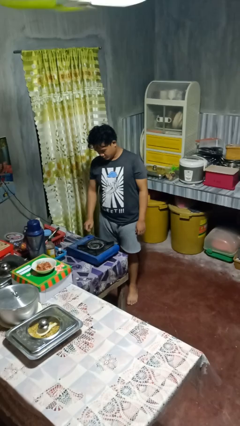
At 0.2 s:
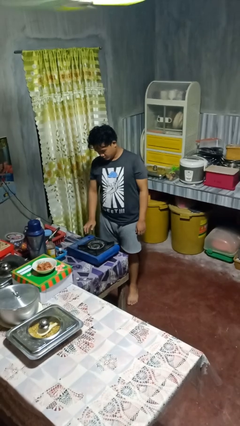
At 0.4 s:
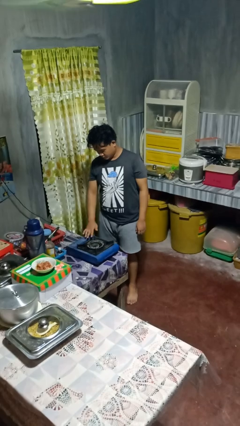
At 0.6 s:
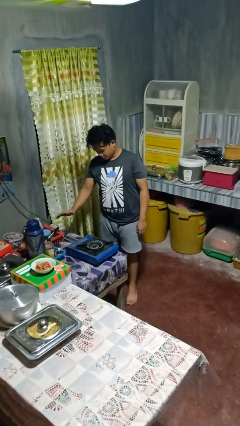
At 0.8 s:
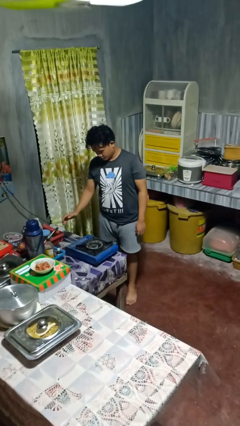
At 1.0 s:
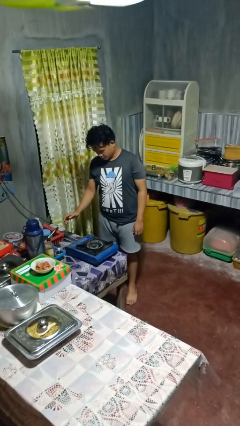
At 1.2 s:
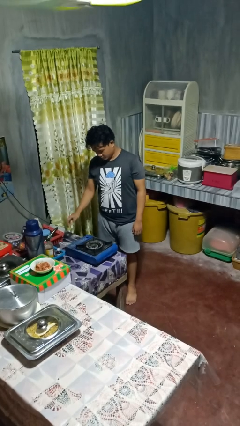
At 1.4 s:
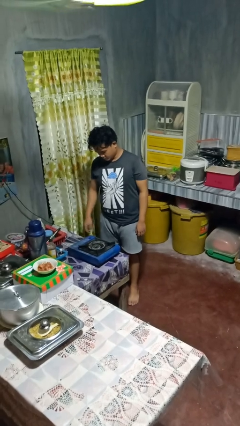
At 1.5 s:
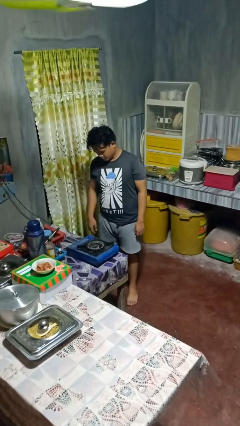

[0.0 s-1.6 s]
person burns hand

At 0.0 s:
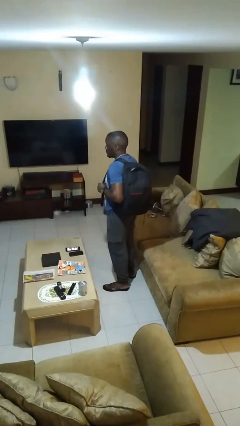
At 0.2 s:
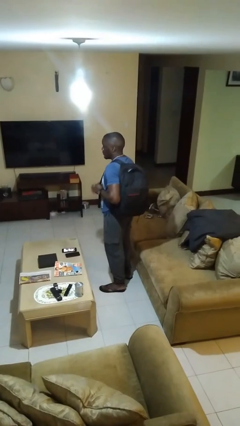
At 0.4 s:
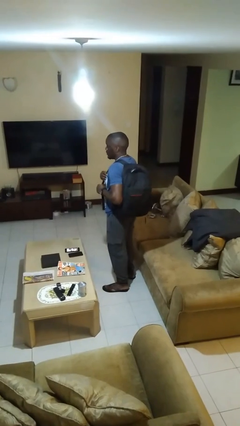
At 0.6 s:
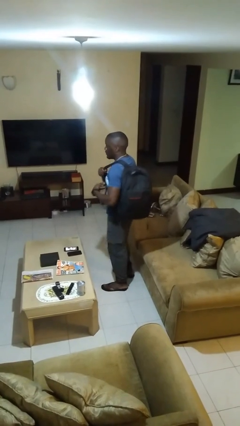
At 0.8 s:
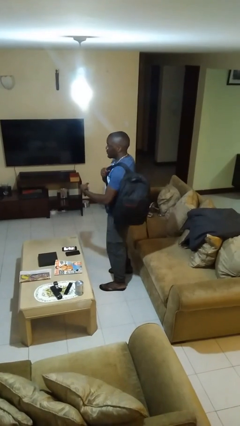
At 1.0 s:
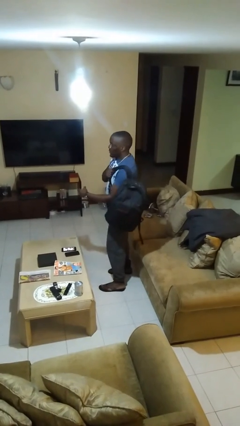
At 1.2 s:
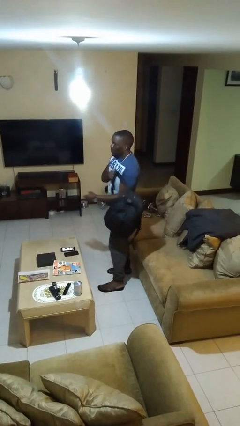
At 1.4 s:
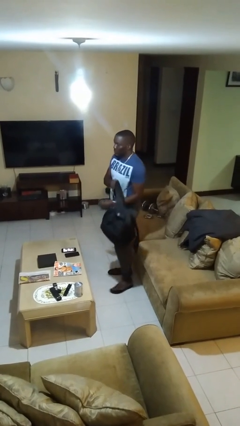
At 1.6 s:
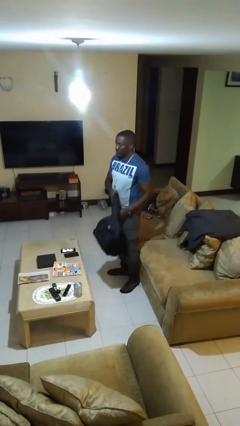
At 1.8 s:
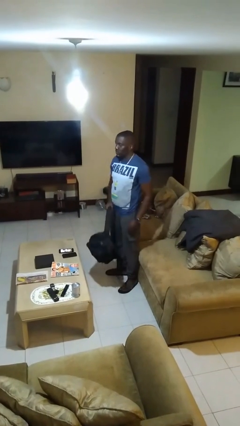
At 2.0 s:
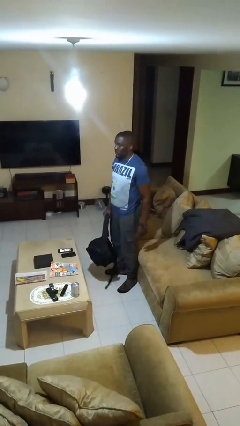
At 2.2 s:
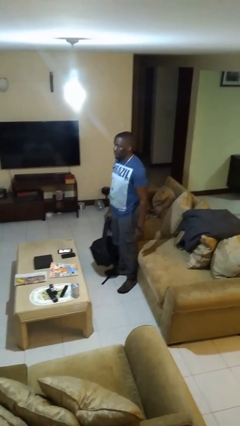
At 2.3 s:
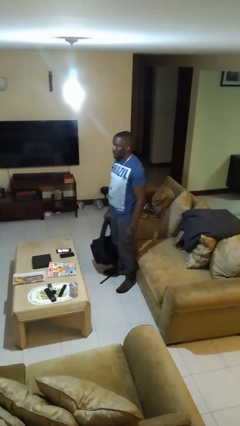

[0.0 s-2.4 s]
person takes off backpack

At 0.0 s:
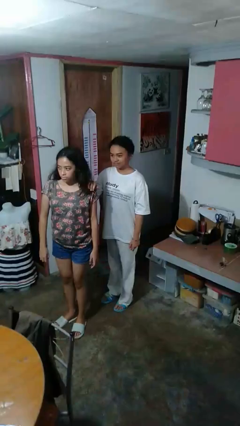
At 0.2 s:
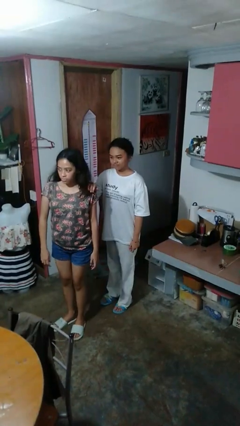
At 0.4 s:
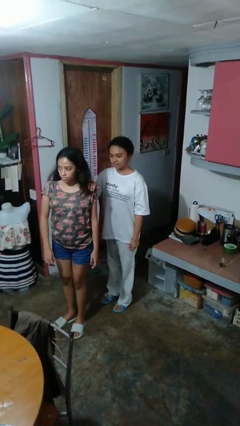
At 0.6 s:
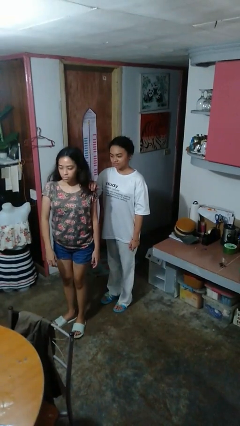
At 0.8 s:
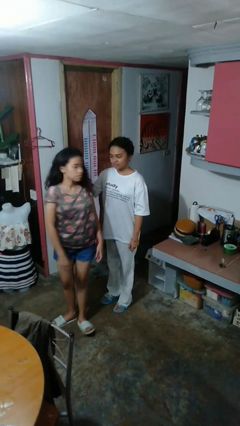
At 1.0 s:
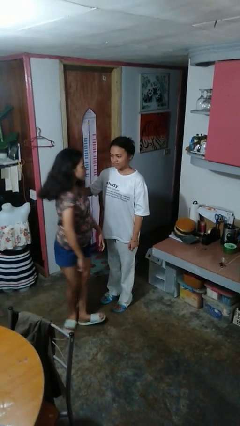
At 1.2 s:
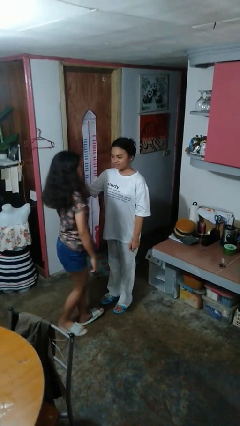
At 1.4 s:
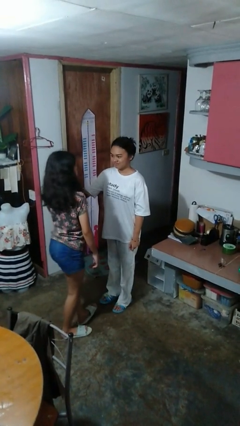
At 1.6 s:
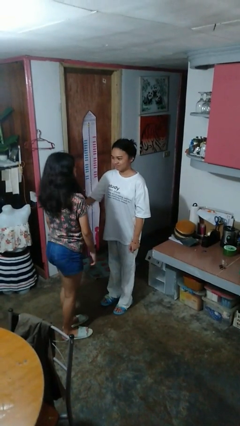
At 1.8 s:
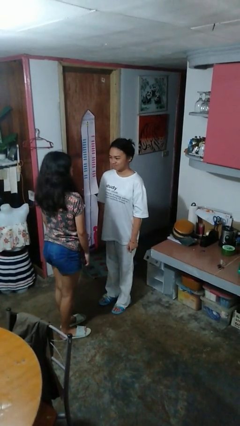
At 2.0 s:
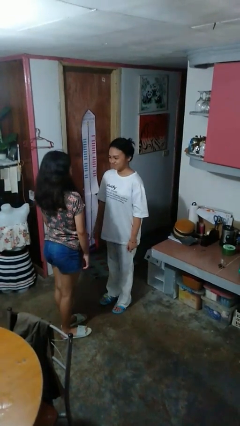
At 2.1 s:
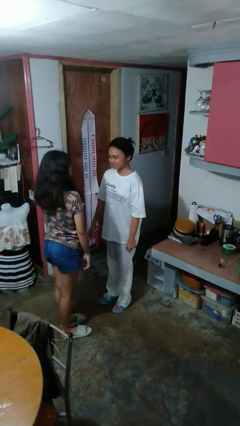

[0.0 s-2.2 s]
person spins person around

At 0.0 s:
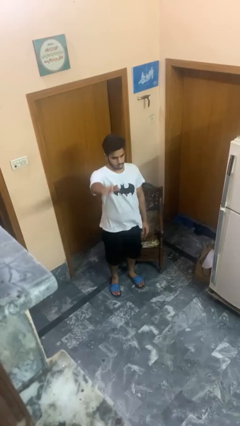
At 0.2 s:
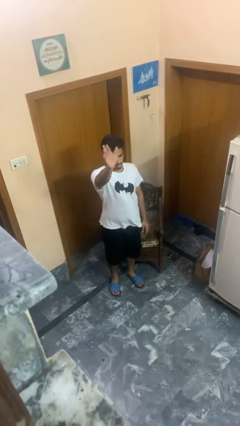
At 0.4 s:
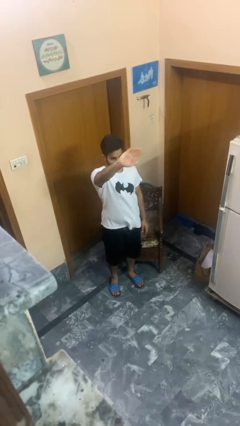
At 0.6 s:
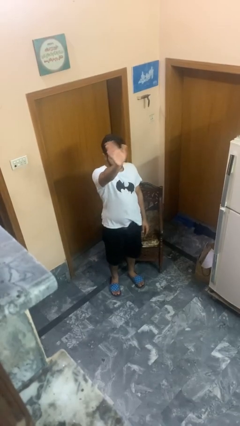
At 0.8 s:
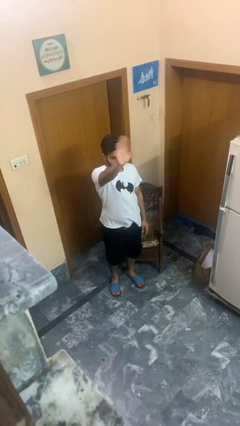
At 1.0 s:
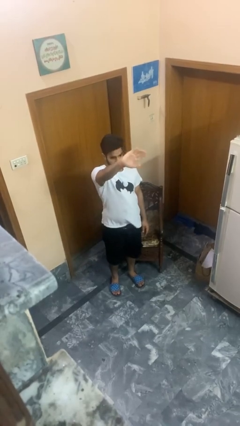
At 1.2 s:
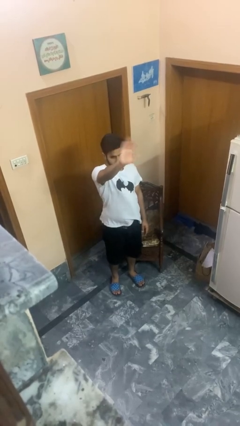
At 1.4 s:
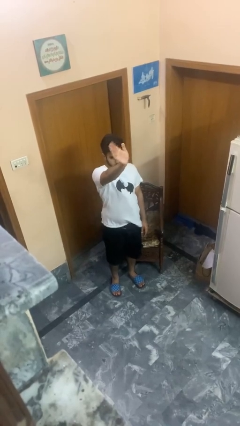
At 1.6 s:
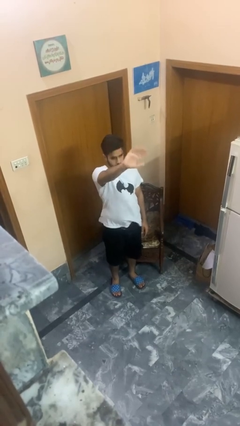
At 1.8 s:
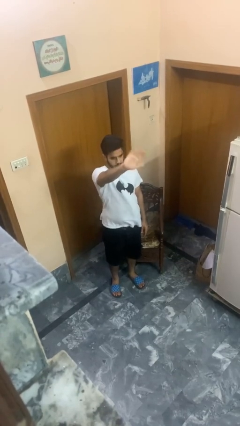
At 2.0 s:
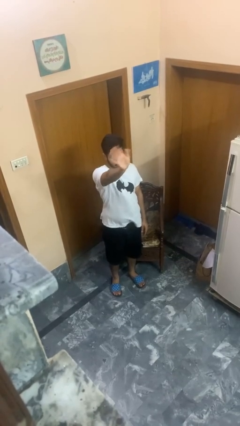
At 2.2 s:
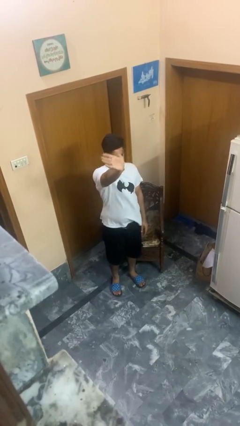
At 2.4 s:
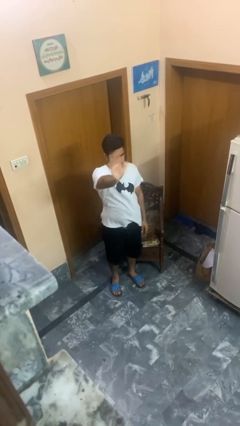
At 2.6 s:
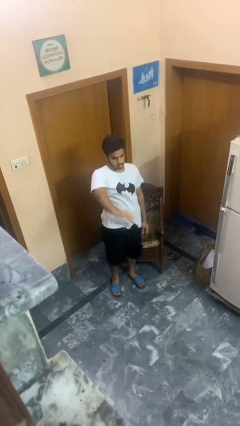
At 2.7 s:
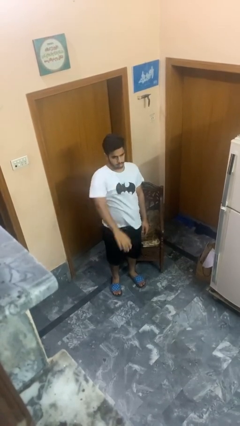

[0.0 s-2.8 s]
person waves at person

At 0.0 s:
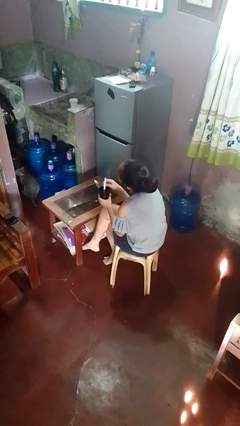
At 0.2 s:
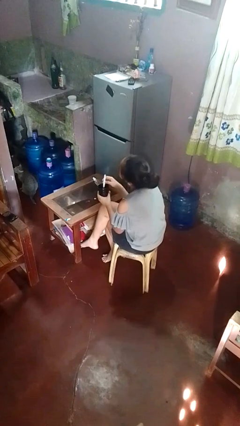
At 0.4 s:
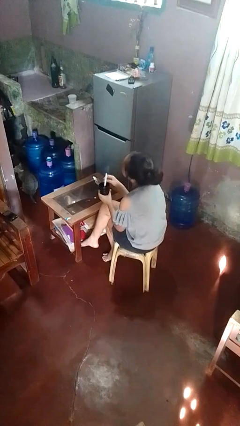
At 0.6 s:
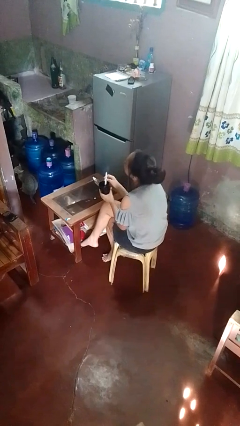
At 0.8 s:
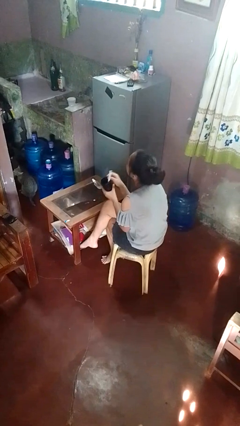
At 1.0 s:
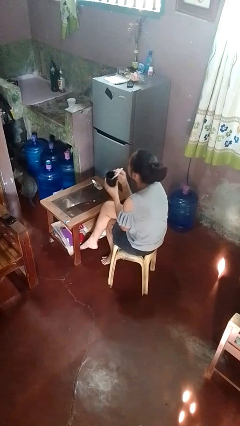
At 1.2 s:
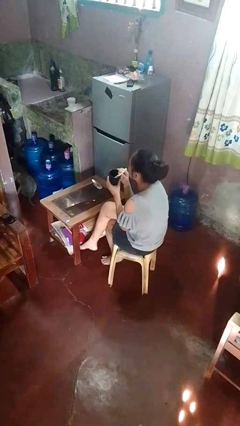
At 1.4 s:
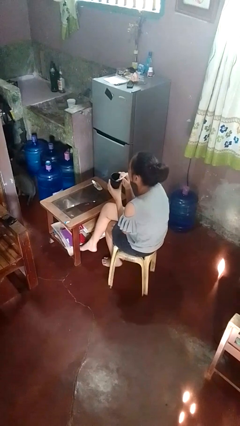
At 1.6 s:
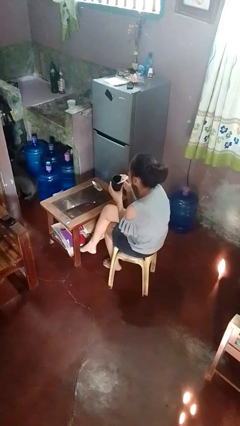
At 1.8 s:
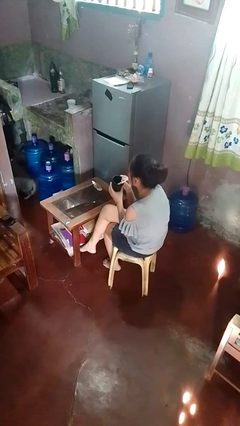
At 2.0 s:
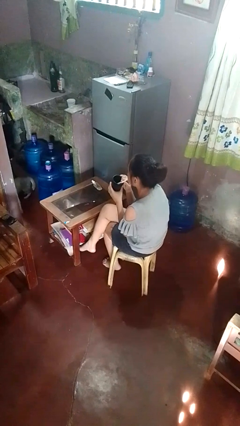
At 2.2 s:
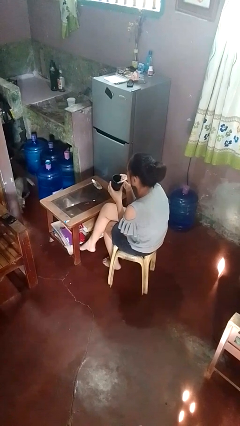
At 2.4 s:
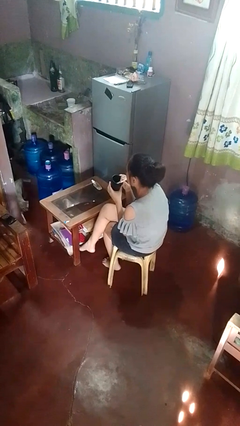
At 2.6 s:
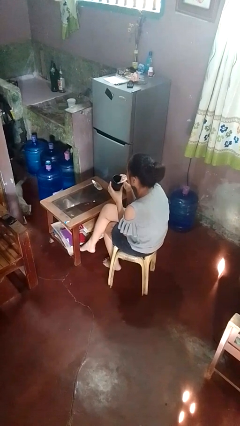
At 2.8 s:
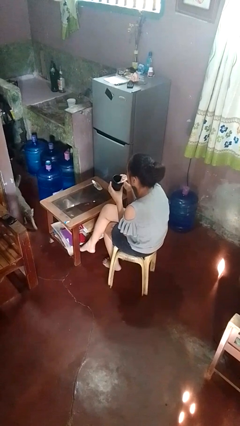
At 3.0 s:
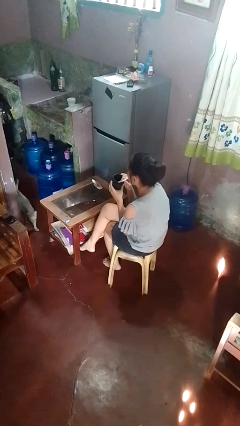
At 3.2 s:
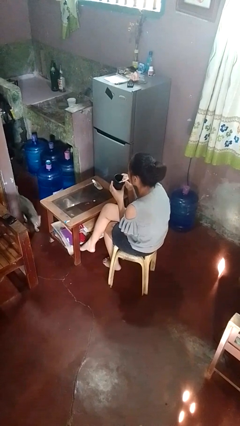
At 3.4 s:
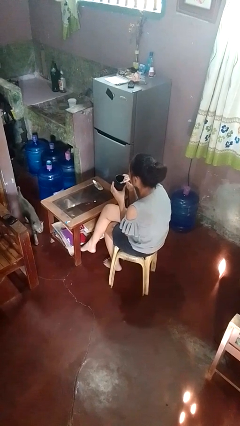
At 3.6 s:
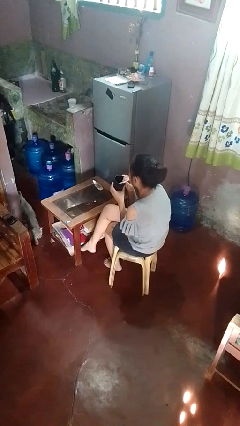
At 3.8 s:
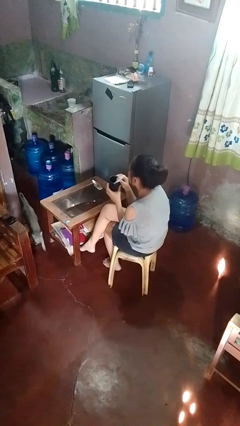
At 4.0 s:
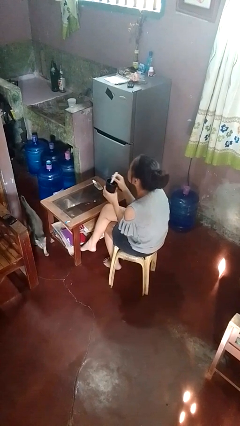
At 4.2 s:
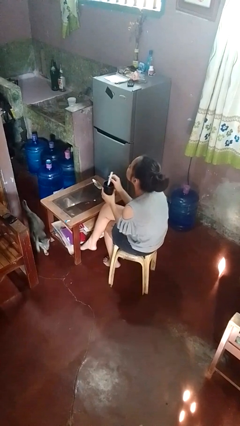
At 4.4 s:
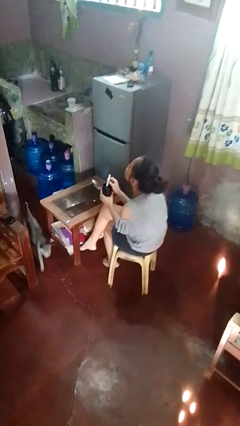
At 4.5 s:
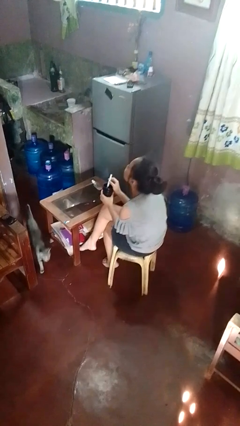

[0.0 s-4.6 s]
person drinks from straw

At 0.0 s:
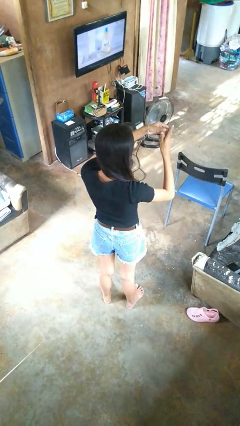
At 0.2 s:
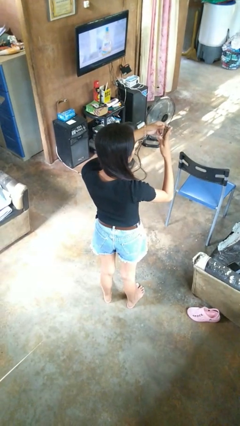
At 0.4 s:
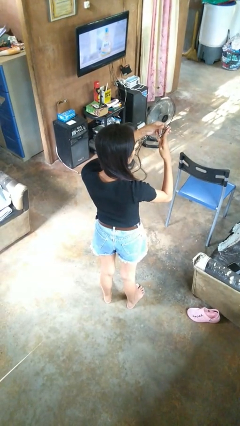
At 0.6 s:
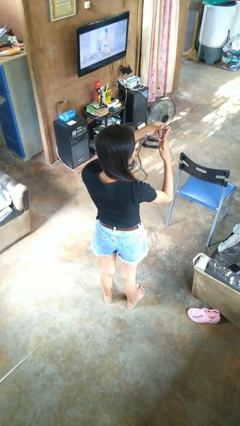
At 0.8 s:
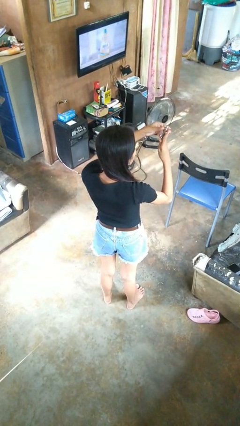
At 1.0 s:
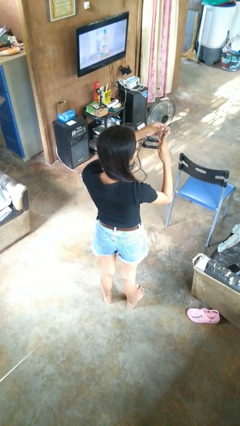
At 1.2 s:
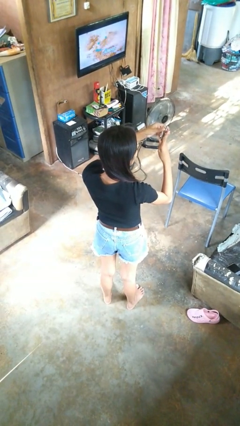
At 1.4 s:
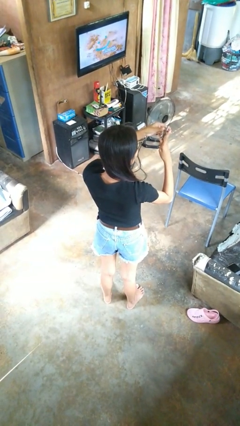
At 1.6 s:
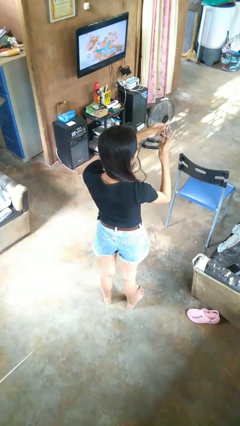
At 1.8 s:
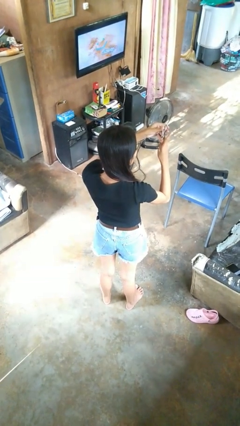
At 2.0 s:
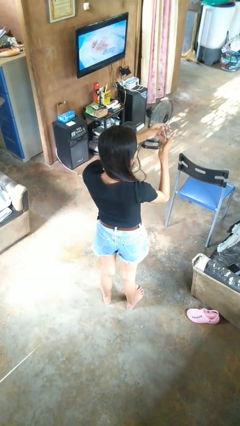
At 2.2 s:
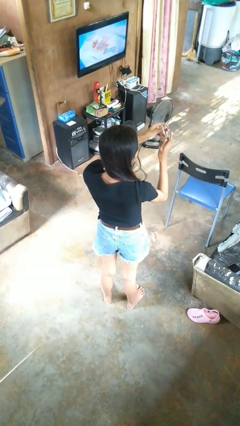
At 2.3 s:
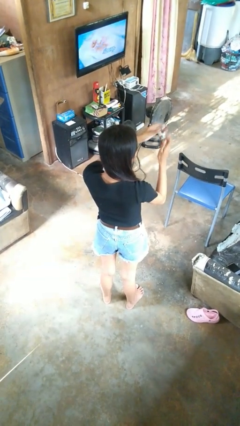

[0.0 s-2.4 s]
person clips fingernails

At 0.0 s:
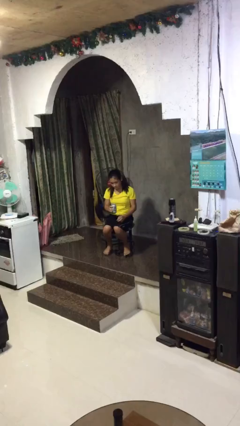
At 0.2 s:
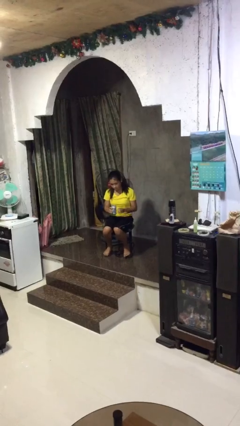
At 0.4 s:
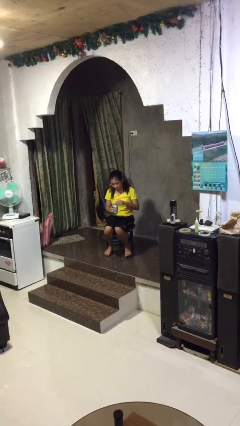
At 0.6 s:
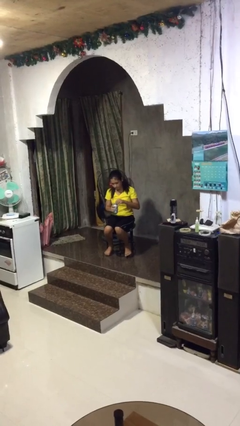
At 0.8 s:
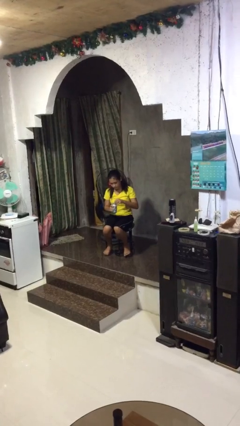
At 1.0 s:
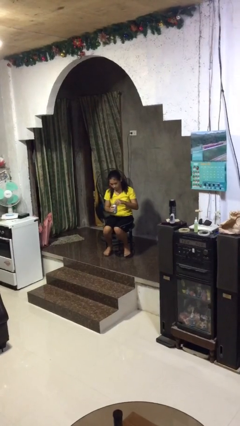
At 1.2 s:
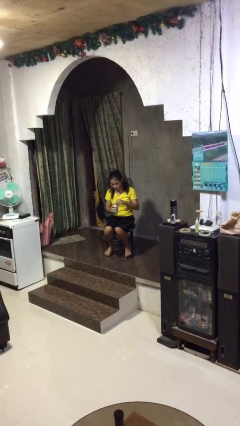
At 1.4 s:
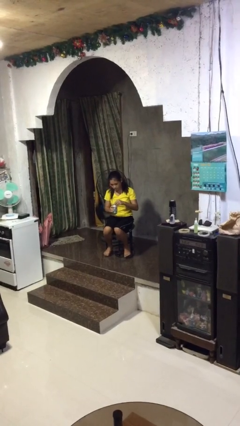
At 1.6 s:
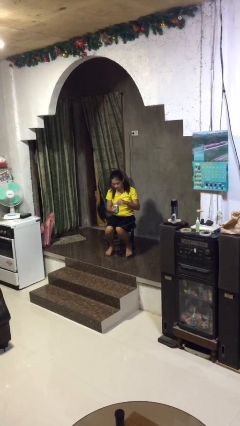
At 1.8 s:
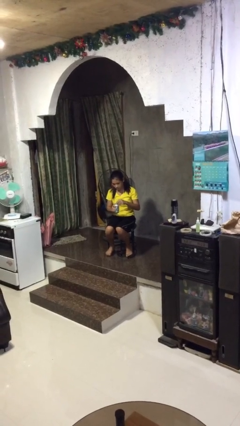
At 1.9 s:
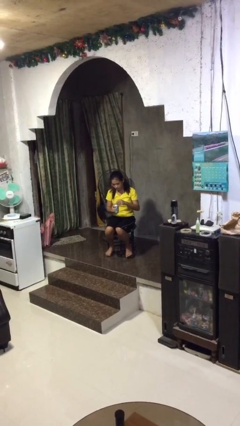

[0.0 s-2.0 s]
person opens beverage can
